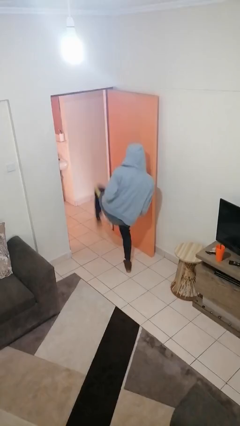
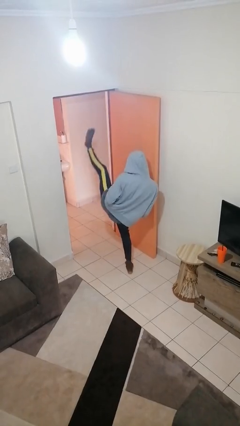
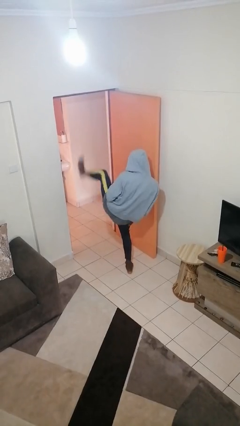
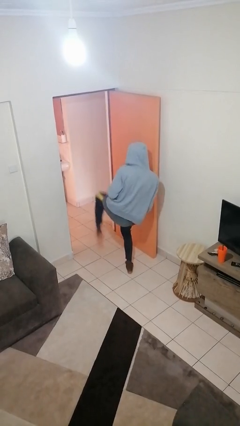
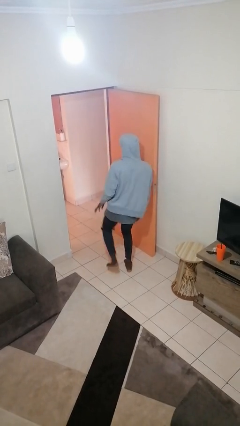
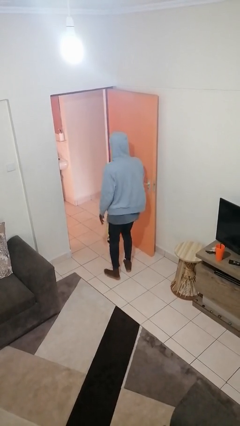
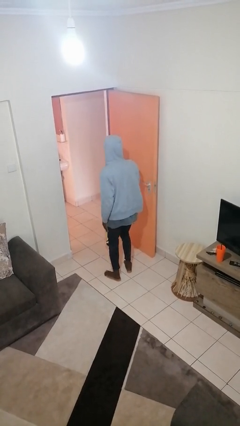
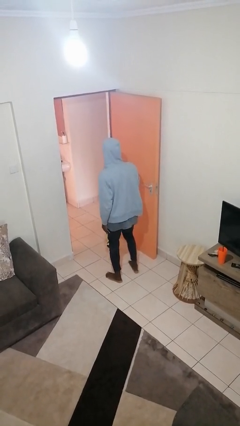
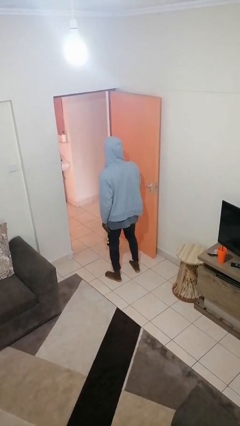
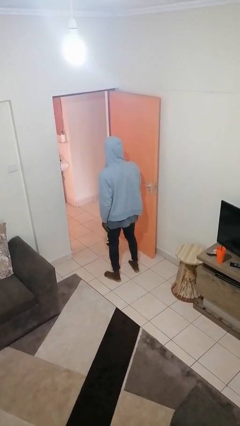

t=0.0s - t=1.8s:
person karate kicks

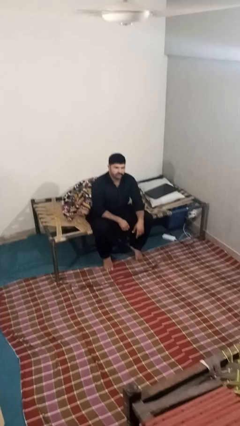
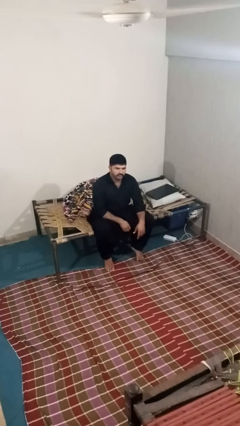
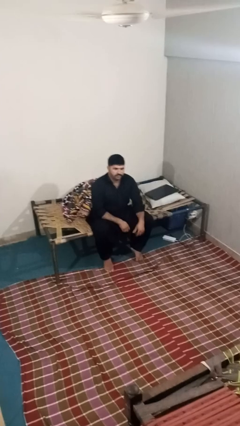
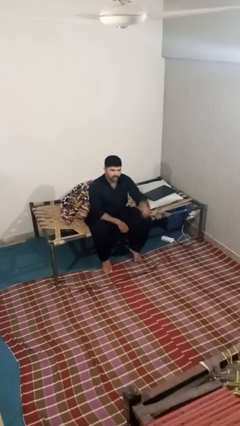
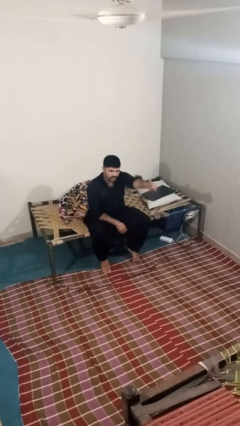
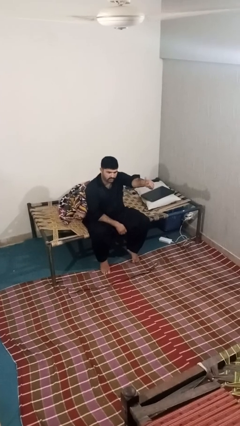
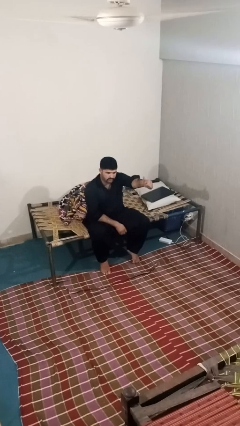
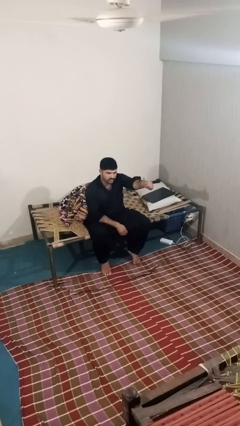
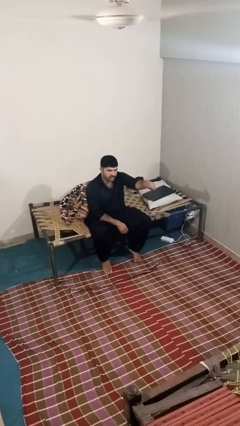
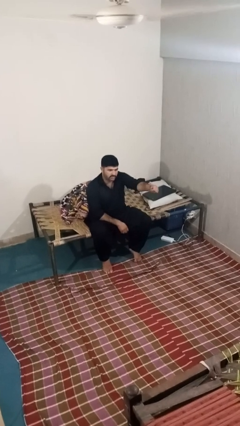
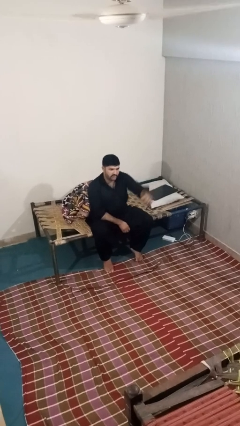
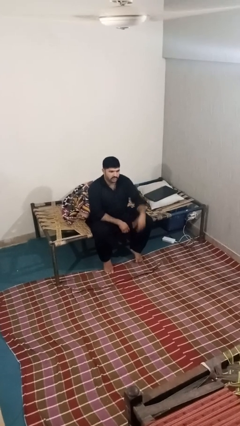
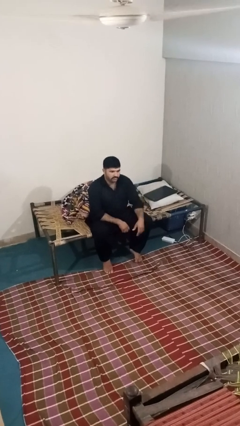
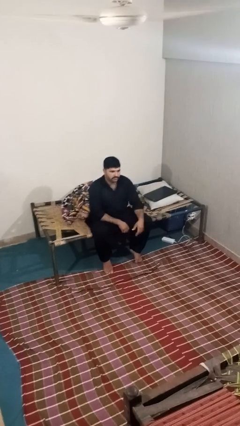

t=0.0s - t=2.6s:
person gestures thumbs up

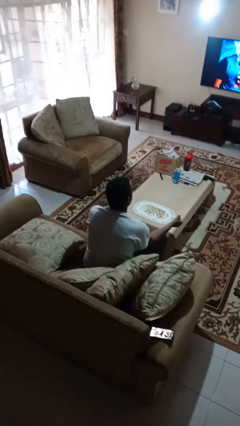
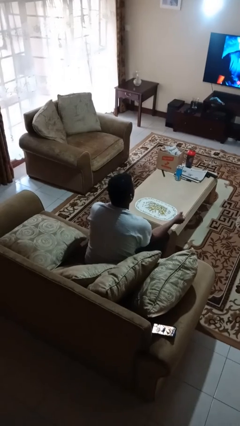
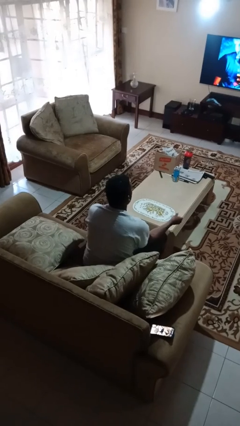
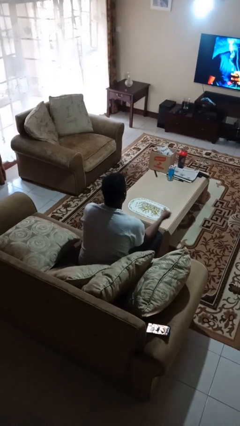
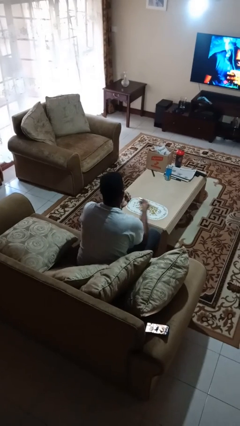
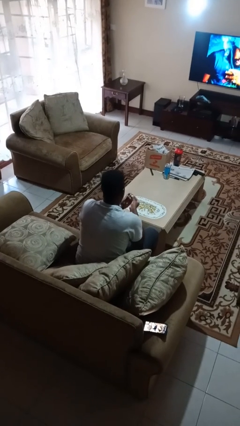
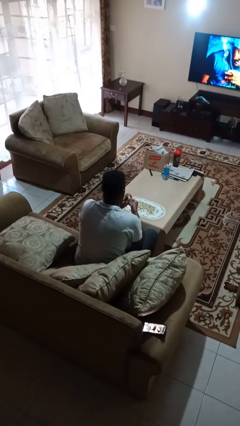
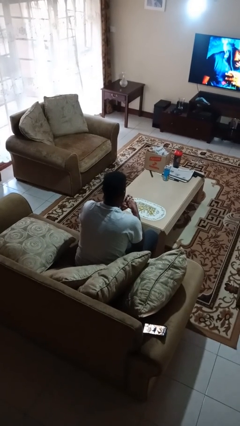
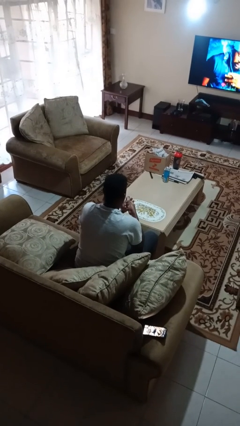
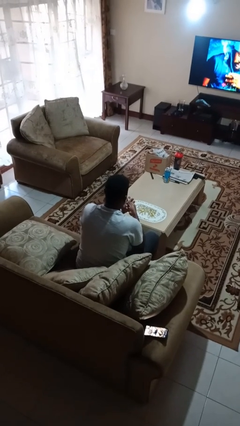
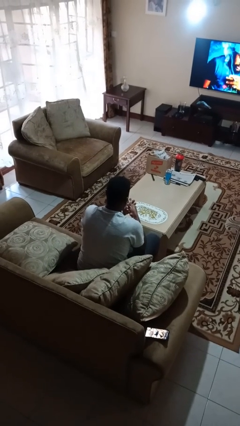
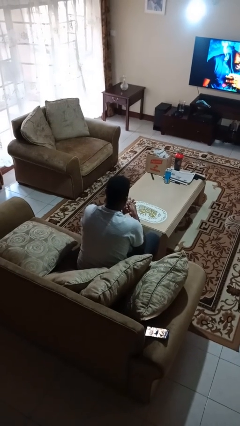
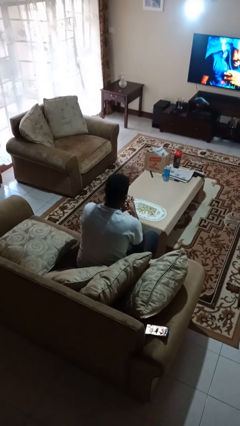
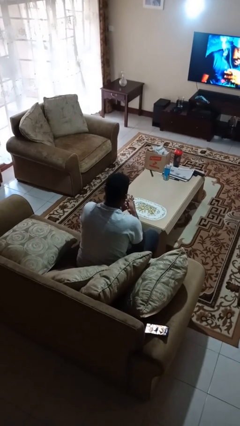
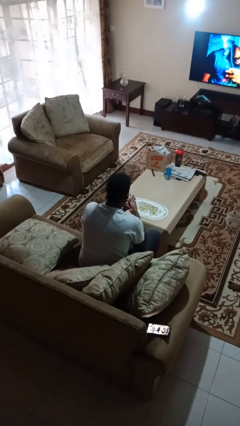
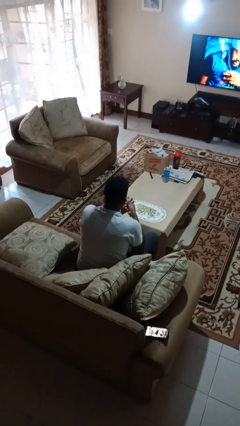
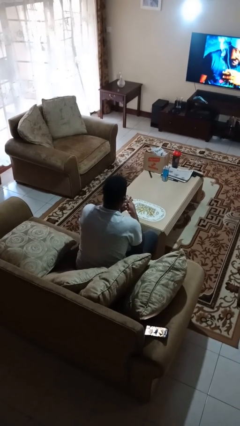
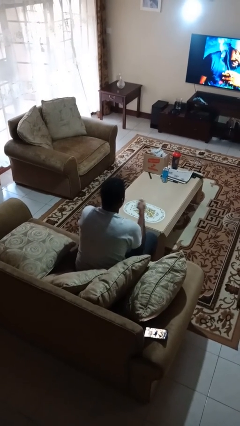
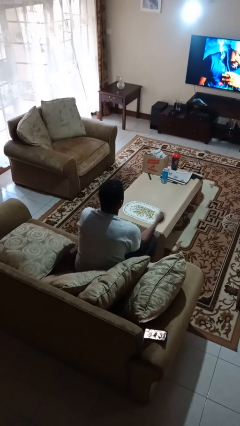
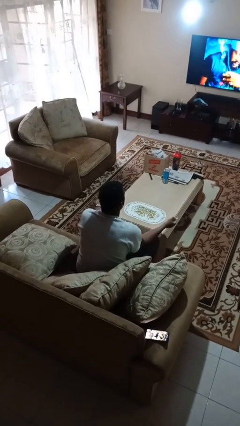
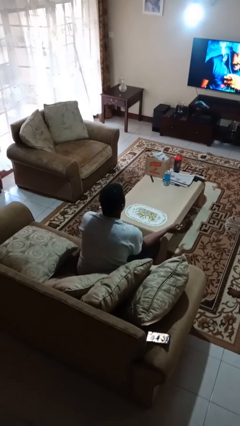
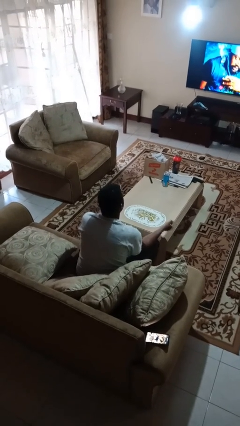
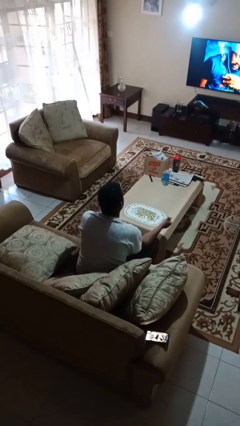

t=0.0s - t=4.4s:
person clips fingernails

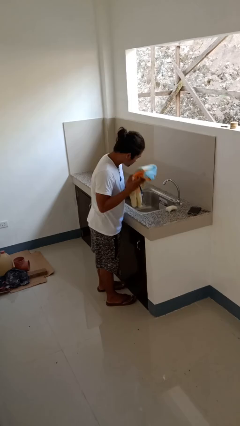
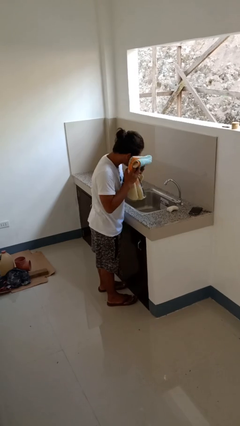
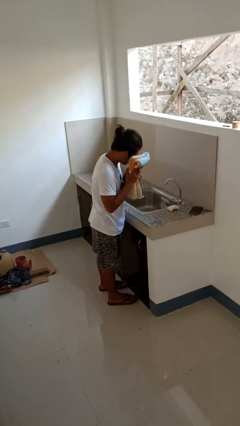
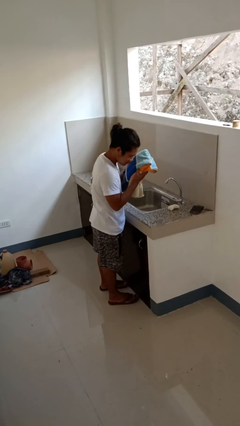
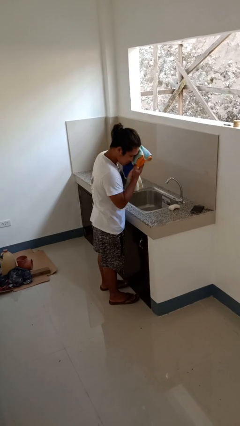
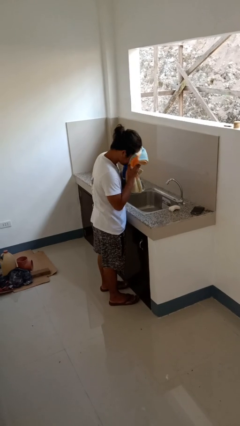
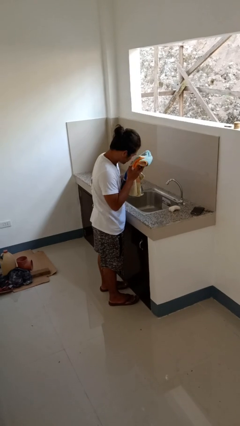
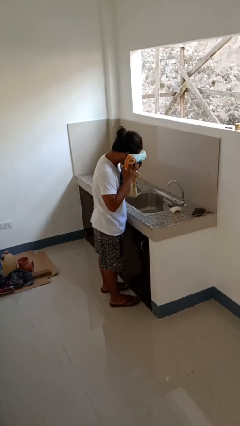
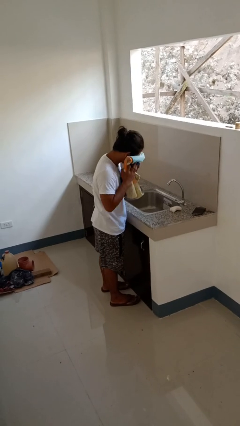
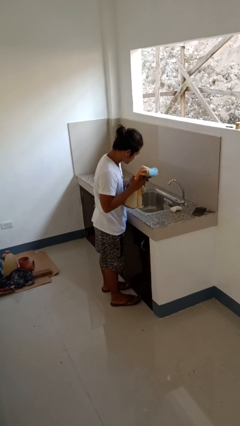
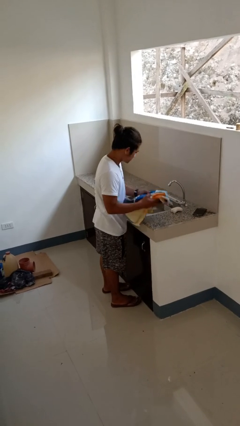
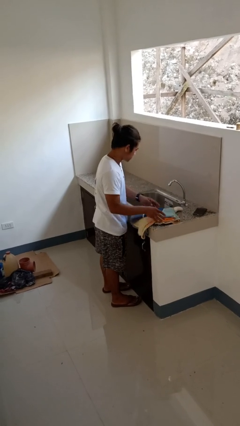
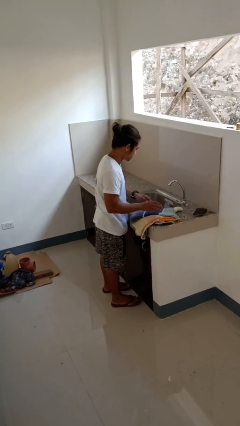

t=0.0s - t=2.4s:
person dries face with towel

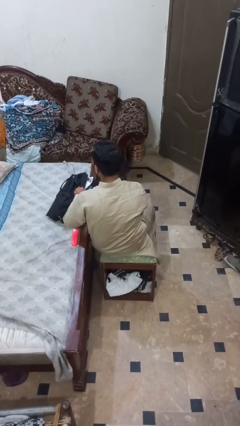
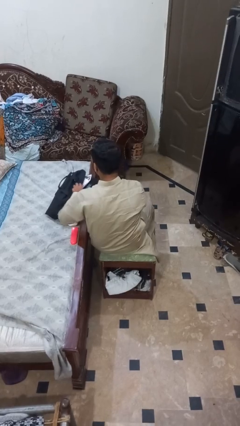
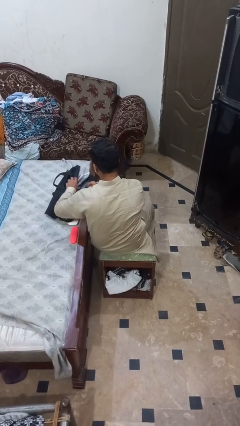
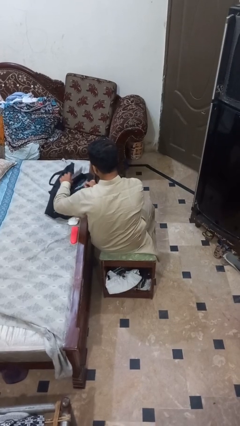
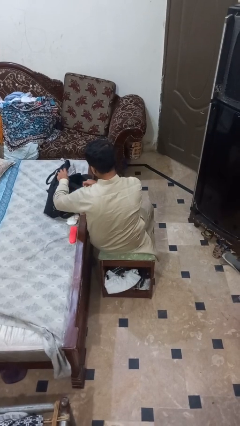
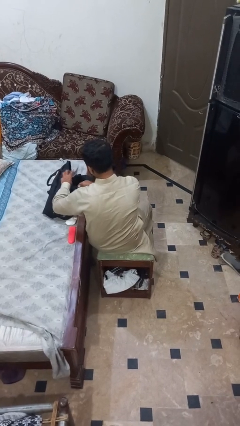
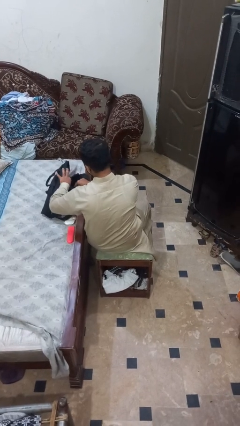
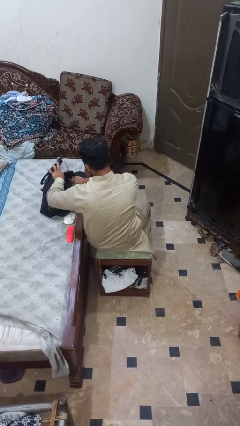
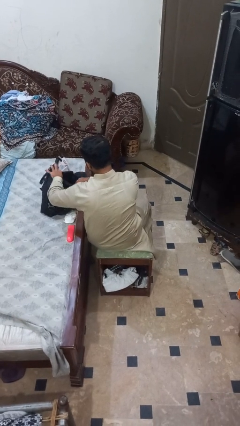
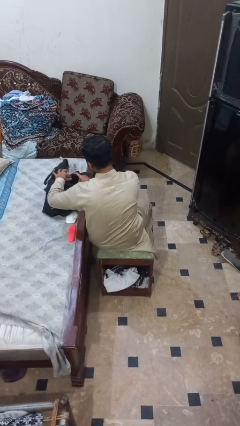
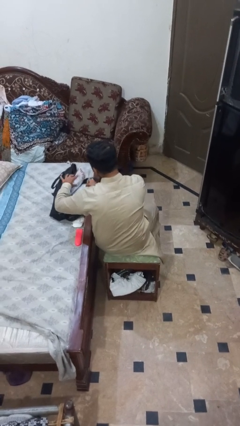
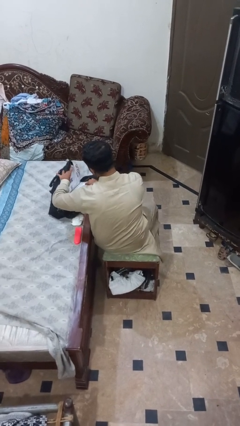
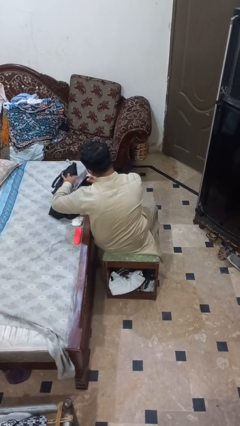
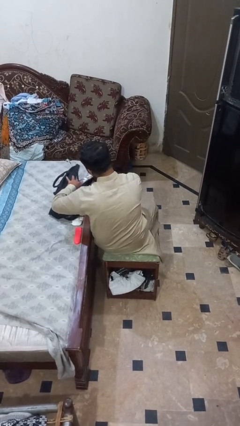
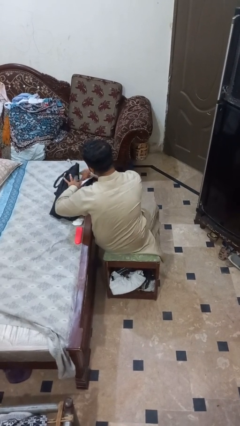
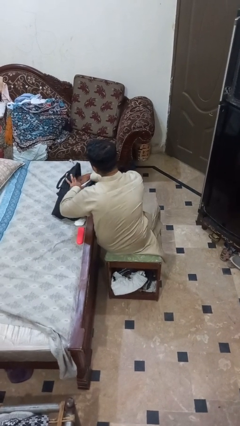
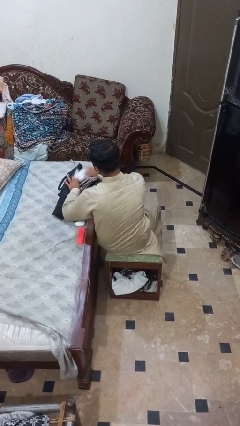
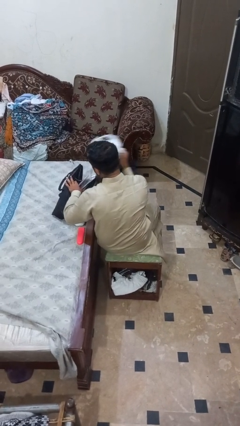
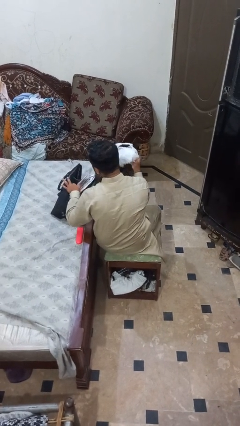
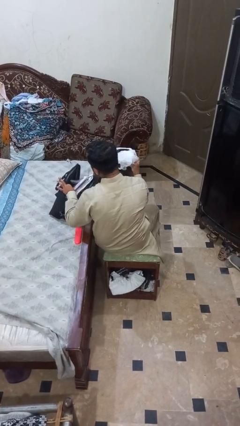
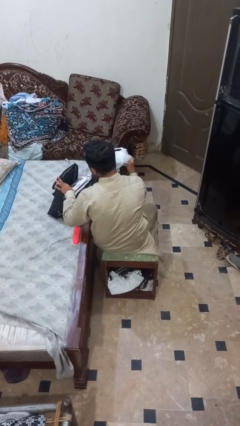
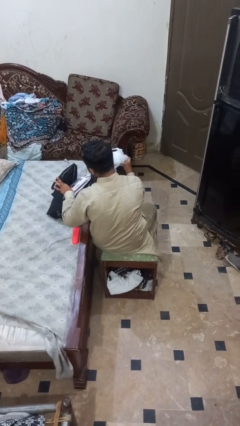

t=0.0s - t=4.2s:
person searches in bag

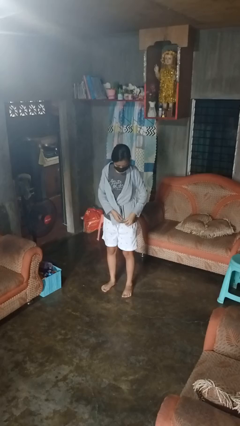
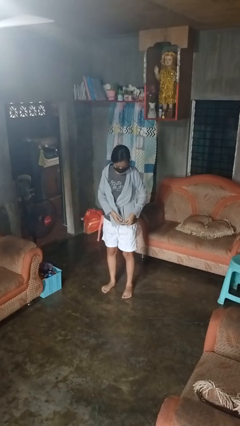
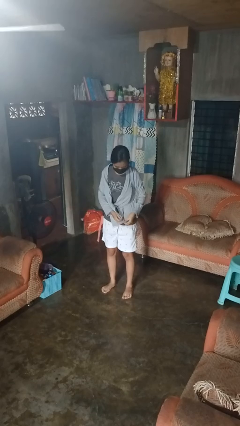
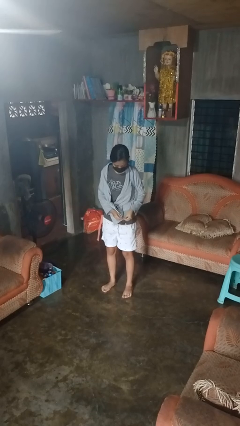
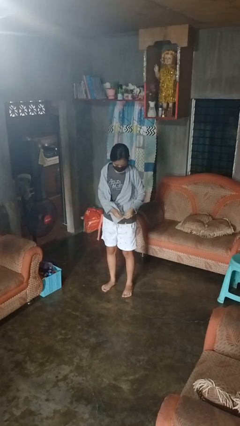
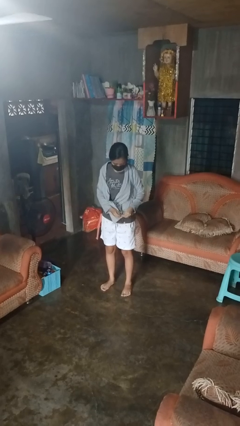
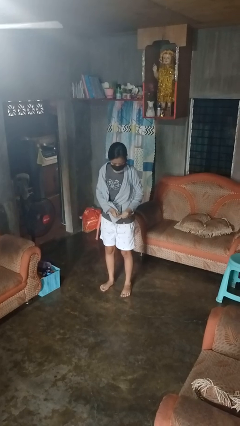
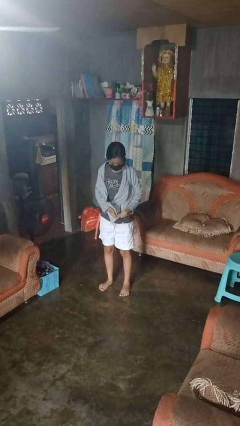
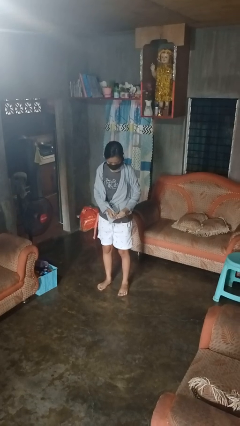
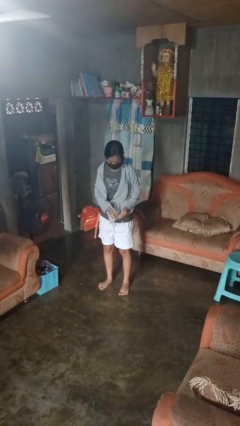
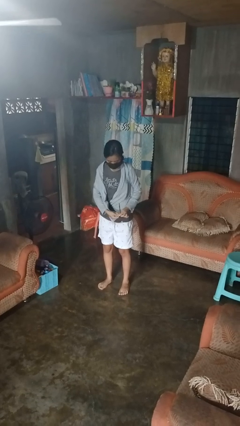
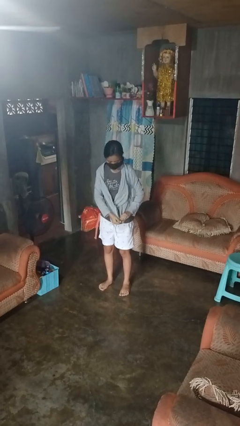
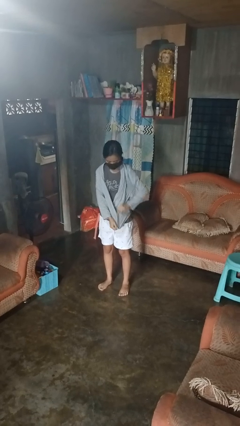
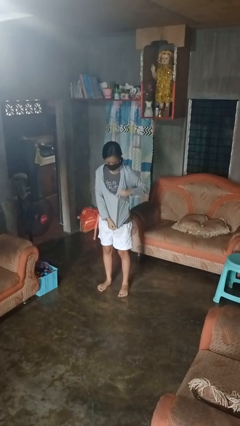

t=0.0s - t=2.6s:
person zips up jacket
